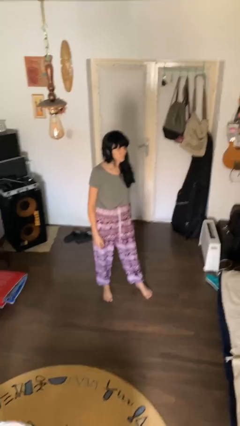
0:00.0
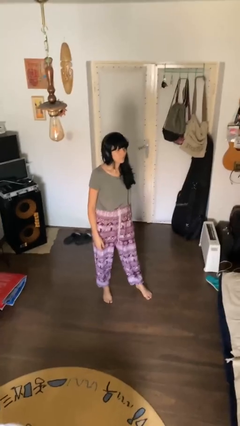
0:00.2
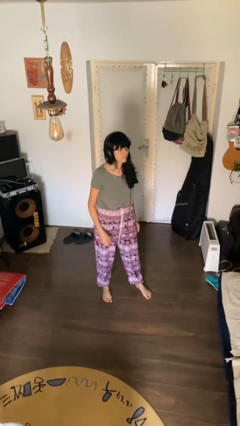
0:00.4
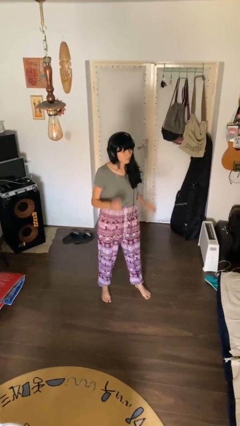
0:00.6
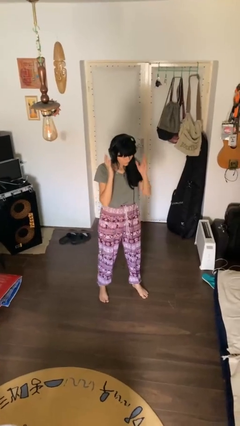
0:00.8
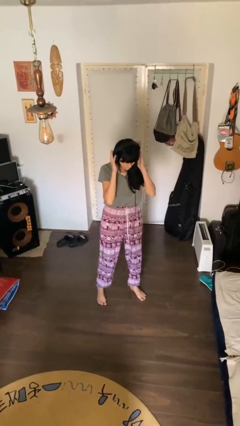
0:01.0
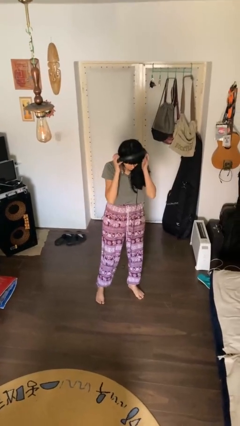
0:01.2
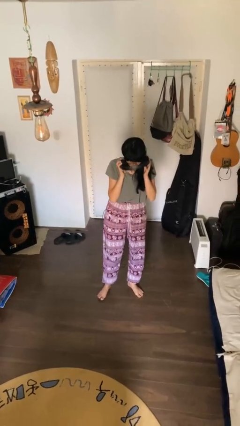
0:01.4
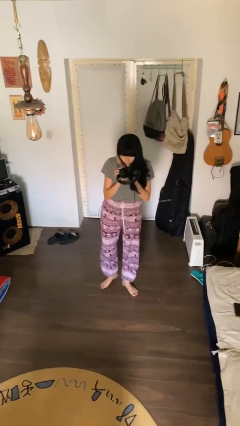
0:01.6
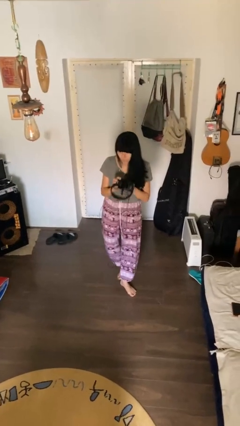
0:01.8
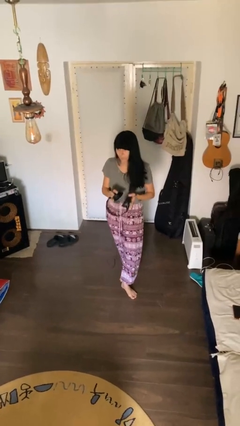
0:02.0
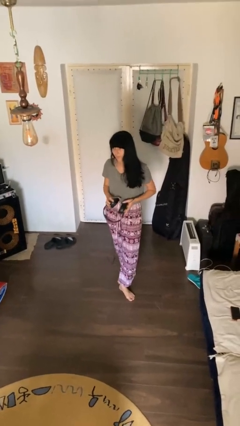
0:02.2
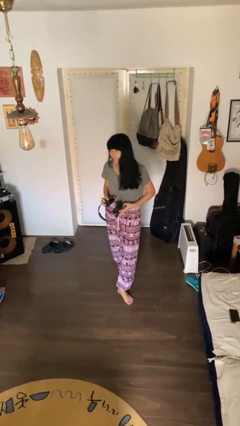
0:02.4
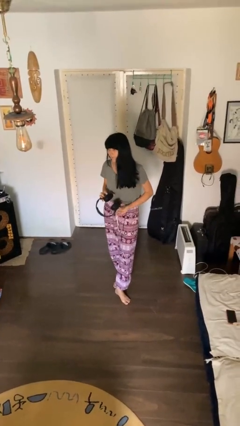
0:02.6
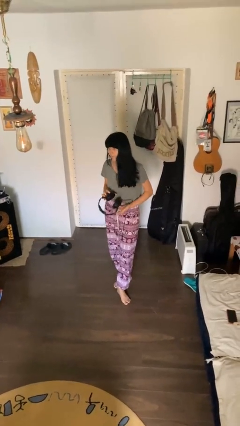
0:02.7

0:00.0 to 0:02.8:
person takes off headphones

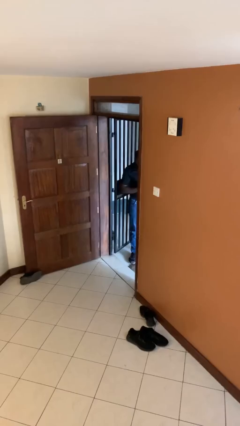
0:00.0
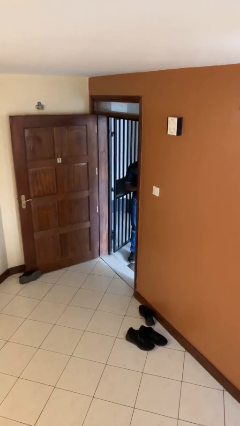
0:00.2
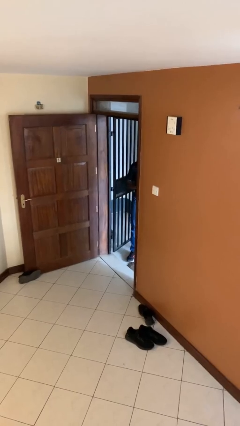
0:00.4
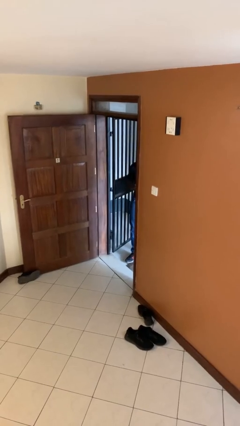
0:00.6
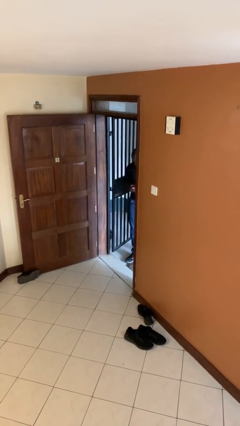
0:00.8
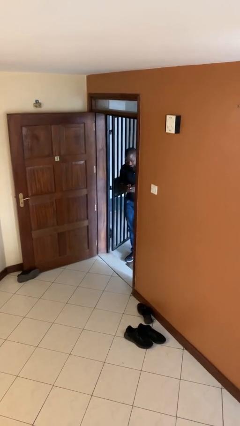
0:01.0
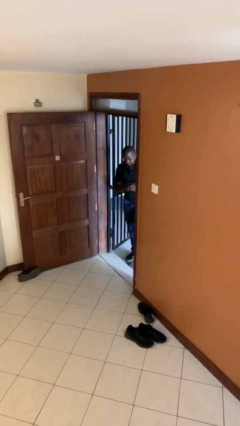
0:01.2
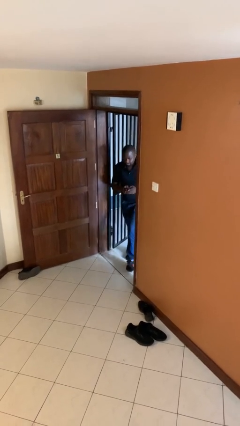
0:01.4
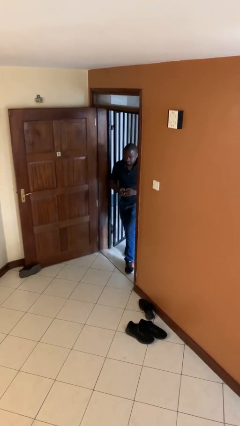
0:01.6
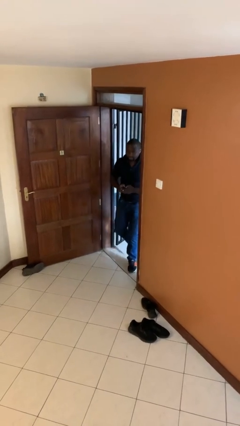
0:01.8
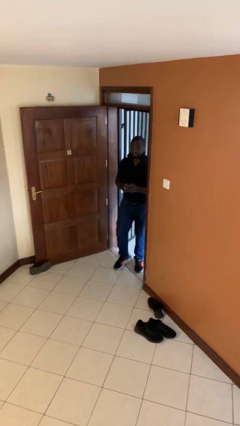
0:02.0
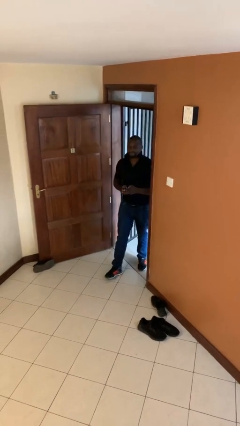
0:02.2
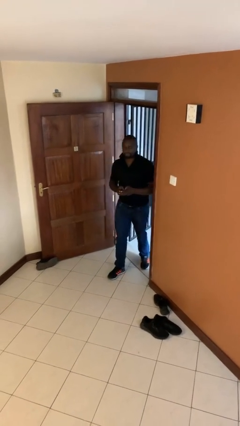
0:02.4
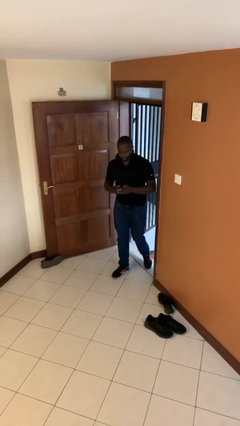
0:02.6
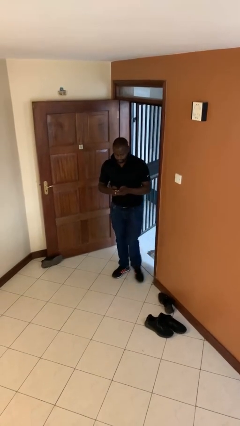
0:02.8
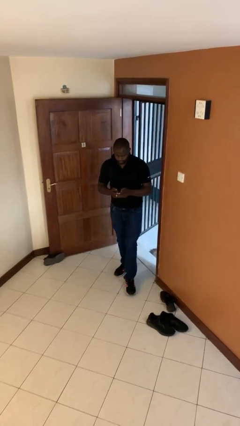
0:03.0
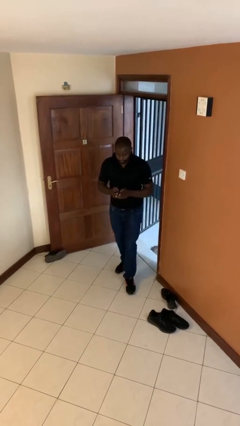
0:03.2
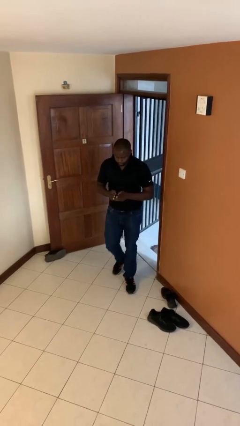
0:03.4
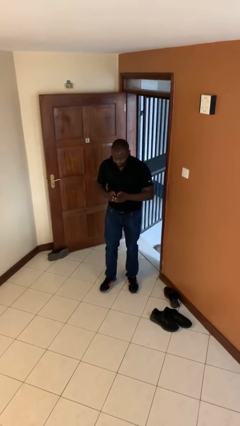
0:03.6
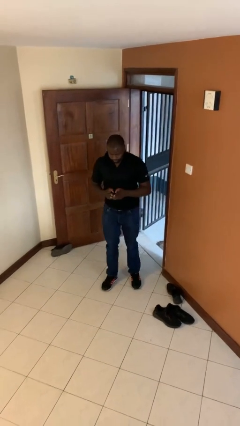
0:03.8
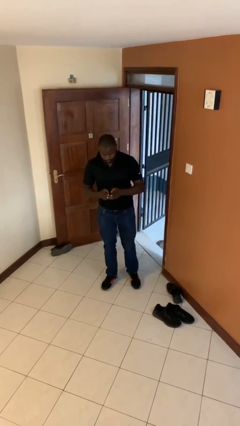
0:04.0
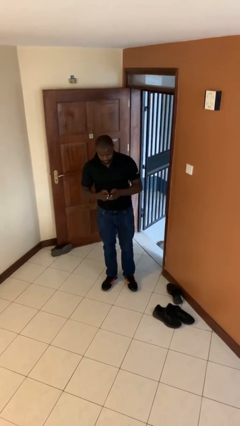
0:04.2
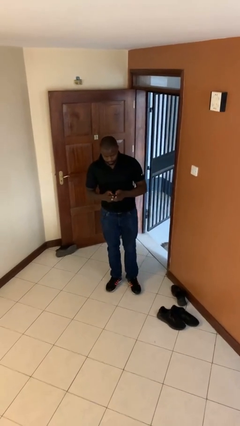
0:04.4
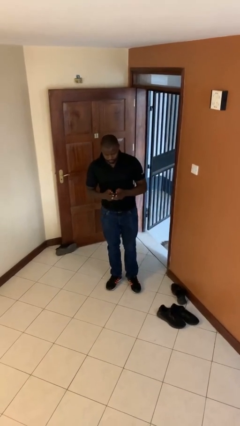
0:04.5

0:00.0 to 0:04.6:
person enters scene through structure

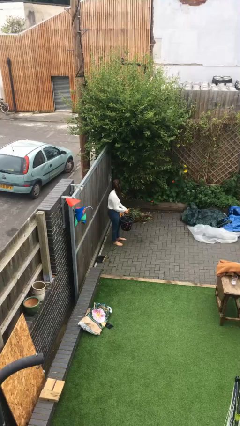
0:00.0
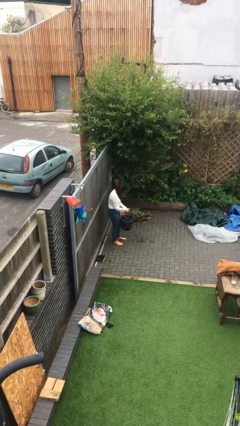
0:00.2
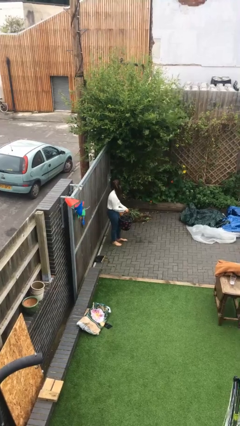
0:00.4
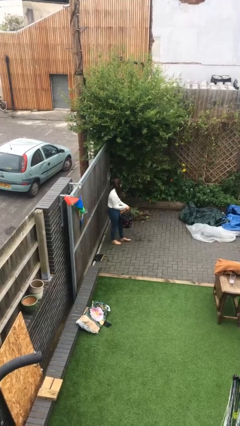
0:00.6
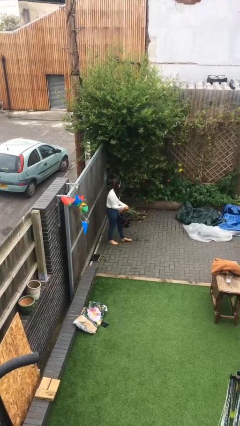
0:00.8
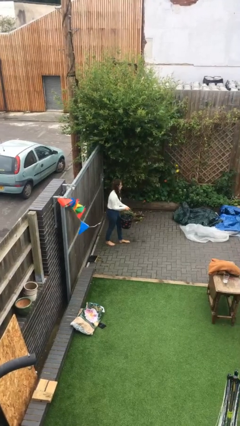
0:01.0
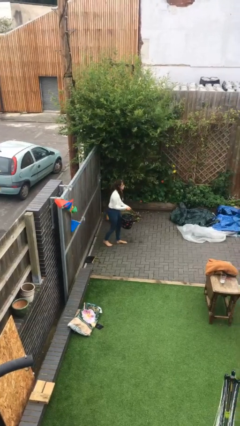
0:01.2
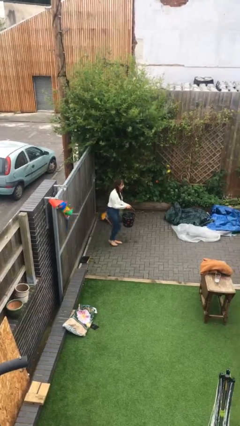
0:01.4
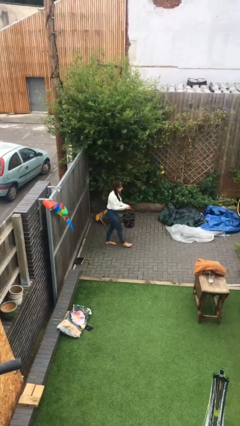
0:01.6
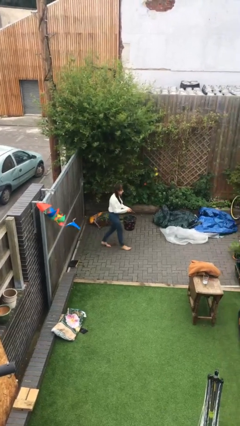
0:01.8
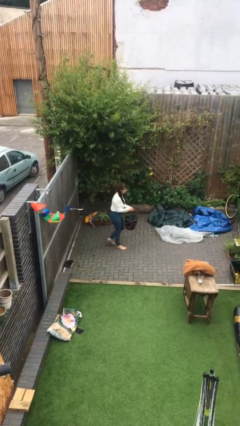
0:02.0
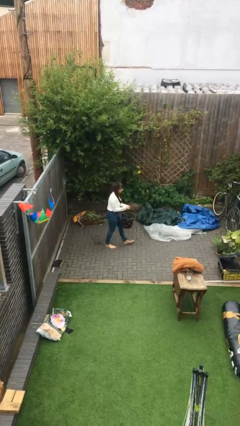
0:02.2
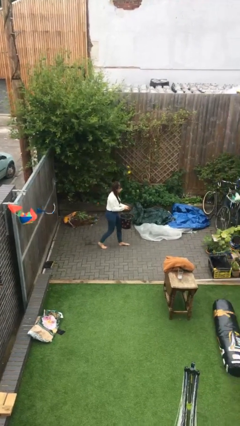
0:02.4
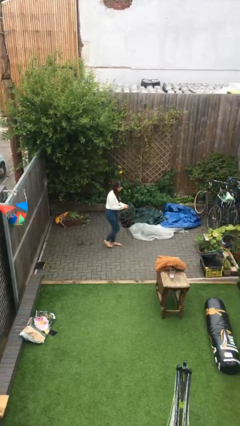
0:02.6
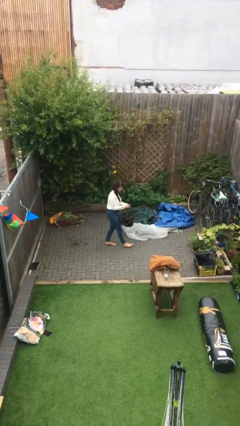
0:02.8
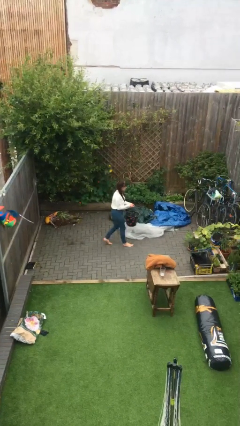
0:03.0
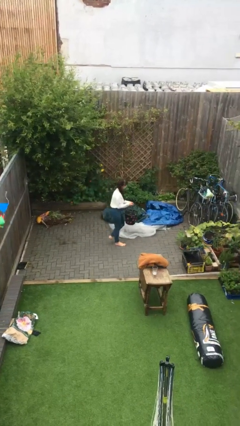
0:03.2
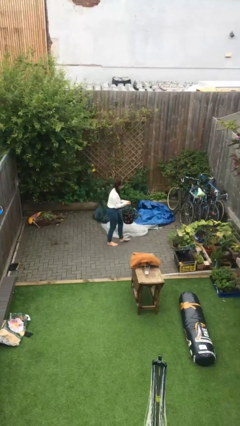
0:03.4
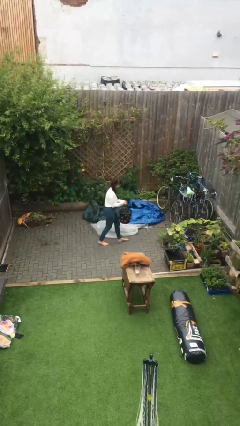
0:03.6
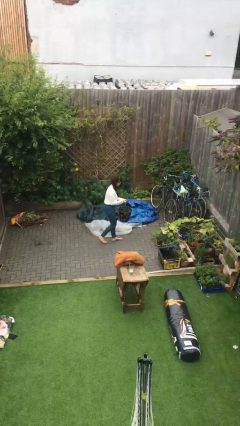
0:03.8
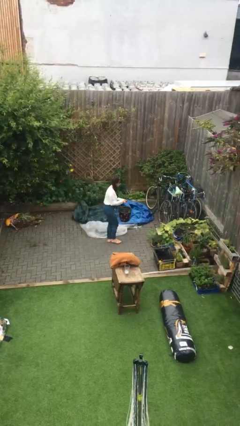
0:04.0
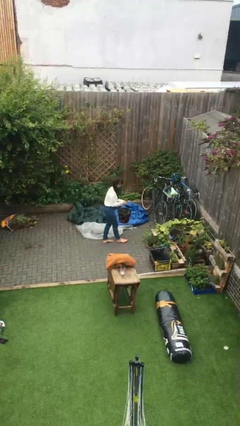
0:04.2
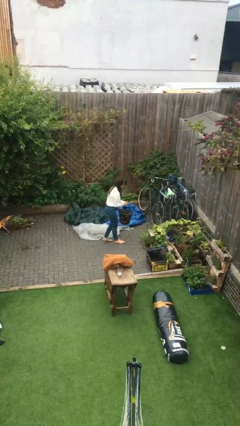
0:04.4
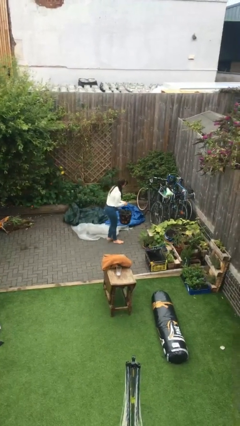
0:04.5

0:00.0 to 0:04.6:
person carries heavy object

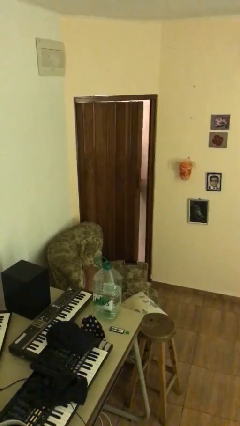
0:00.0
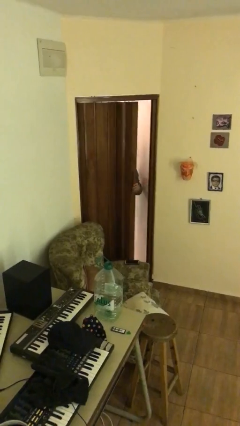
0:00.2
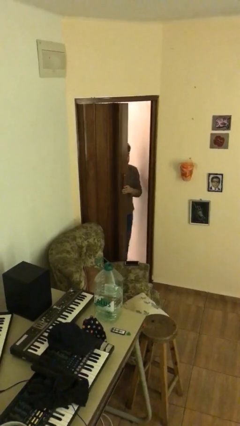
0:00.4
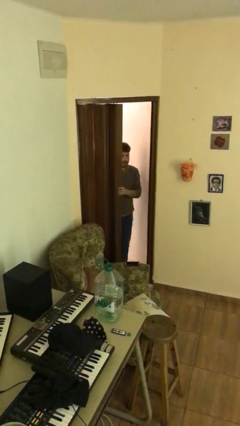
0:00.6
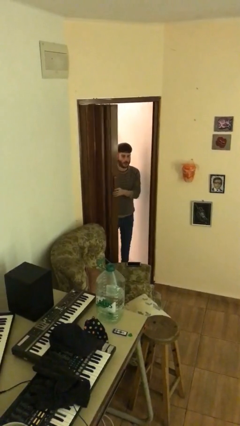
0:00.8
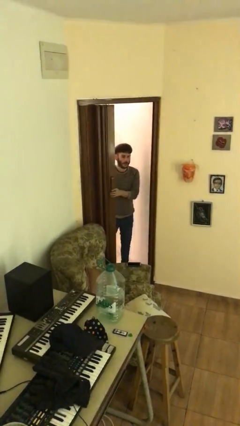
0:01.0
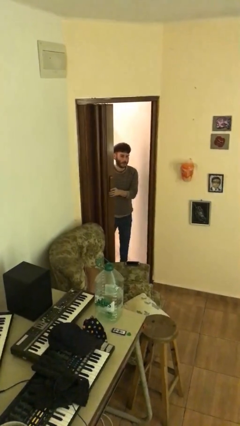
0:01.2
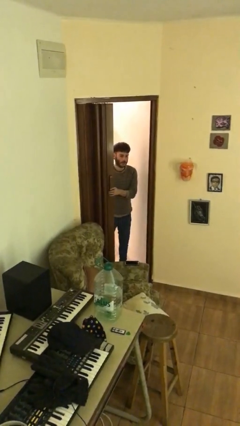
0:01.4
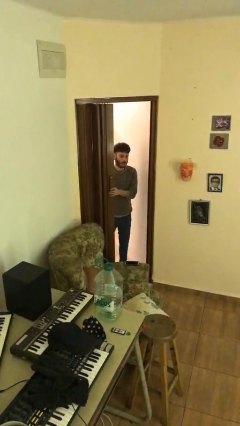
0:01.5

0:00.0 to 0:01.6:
person opens sliding door

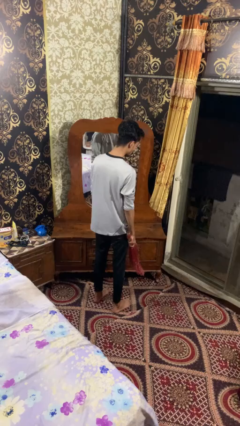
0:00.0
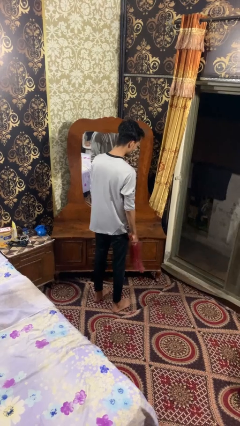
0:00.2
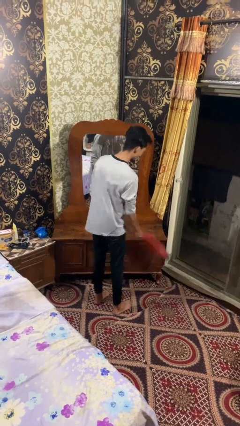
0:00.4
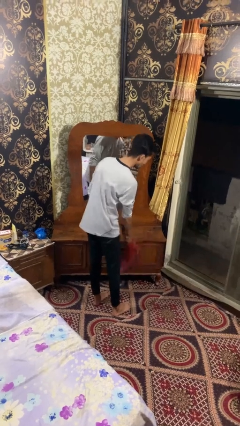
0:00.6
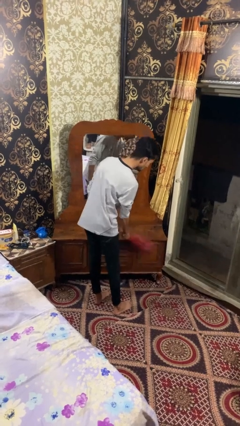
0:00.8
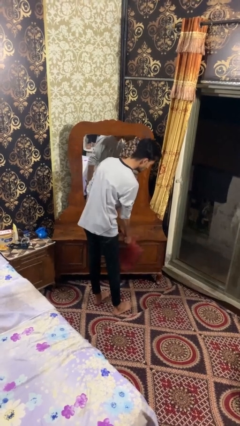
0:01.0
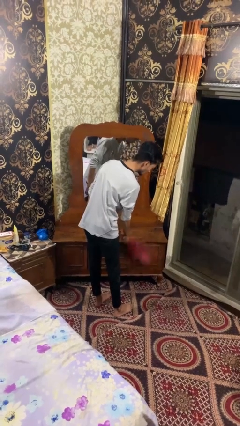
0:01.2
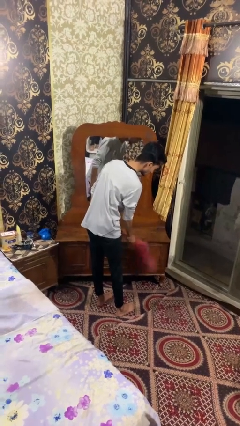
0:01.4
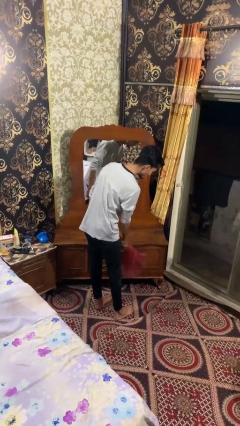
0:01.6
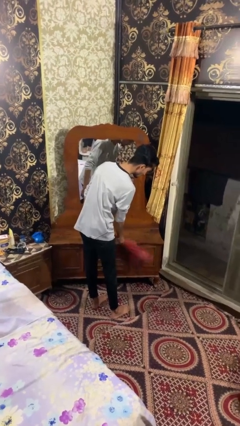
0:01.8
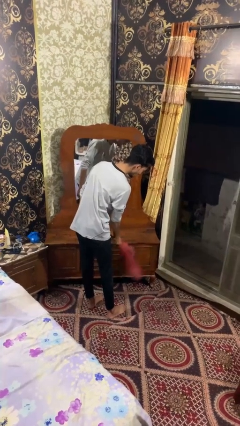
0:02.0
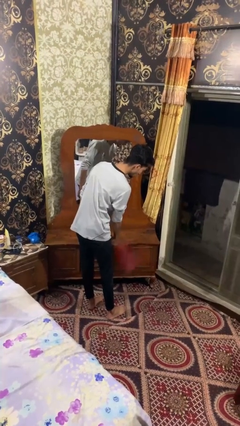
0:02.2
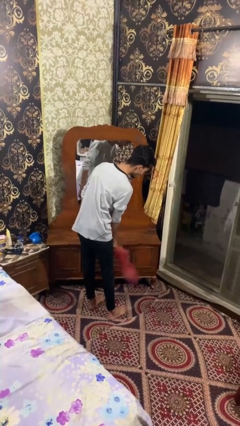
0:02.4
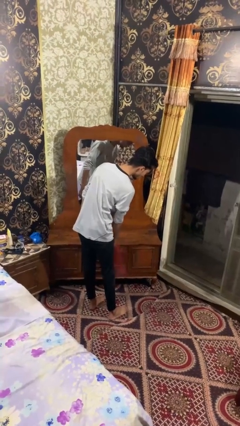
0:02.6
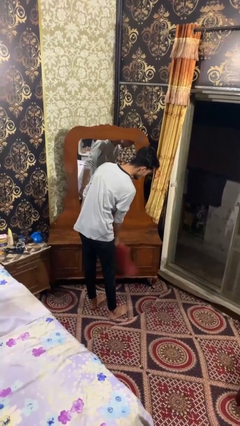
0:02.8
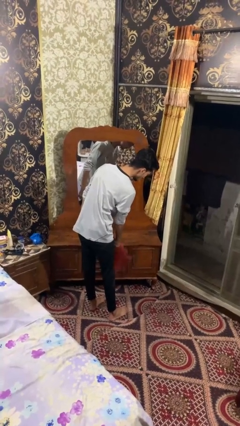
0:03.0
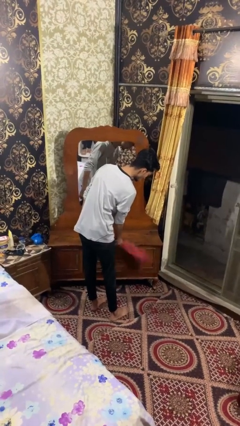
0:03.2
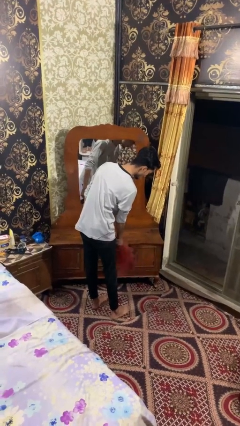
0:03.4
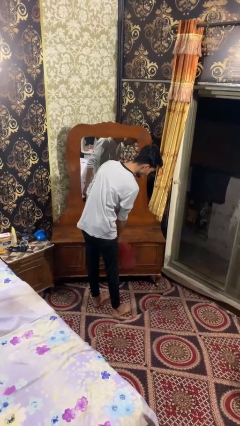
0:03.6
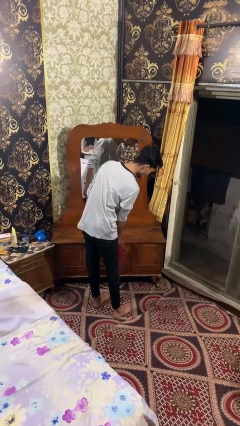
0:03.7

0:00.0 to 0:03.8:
person dusts furniture

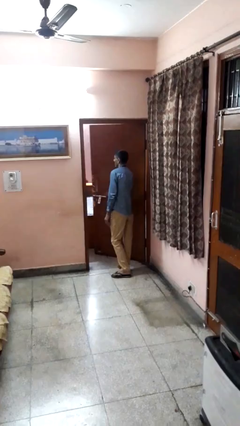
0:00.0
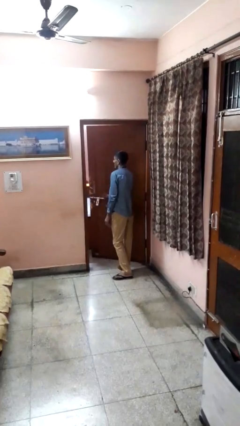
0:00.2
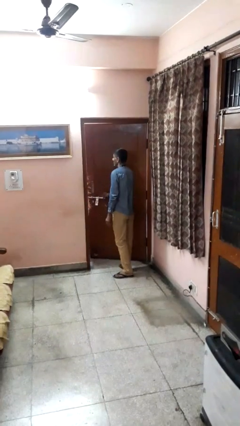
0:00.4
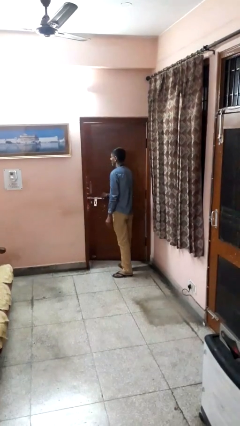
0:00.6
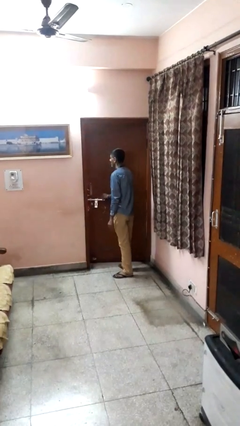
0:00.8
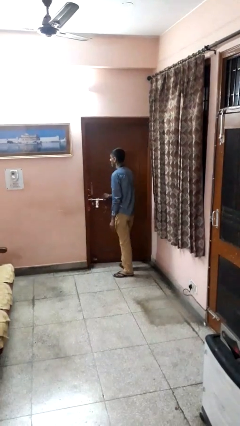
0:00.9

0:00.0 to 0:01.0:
person closes facility door
